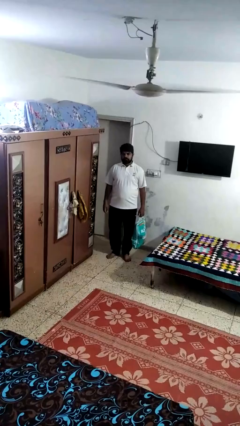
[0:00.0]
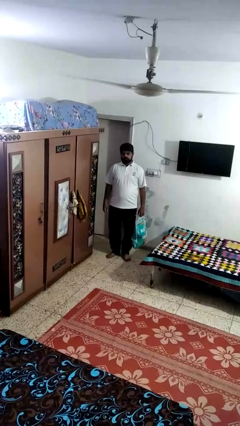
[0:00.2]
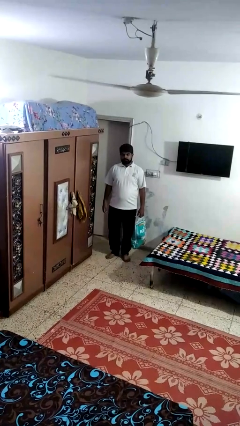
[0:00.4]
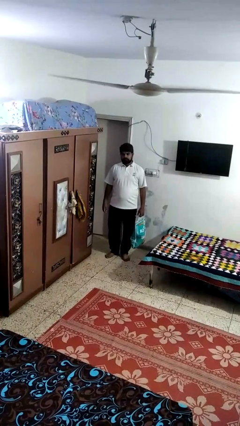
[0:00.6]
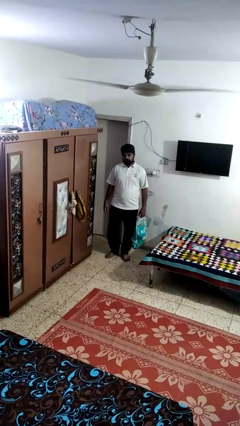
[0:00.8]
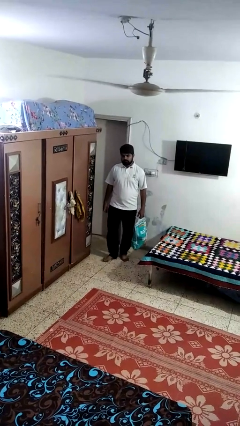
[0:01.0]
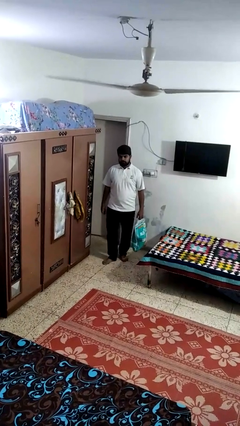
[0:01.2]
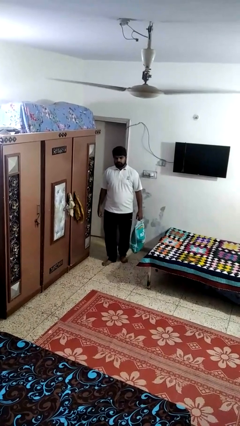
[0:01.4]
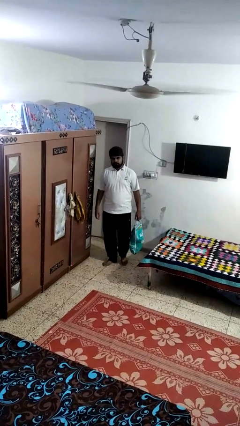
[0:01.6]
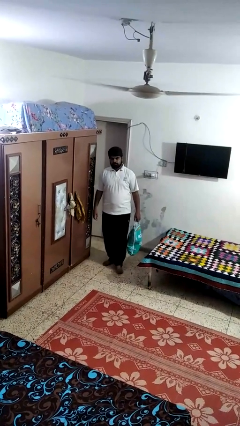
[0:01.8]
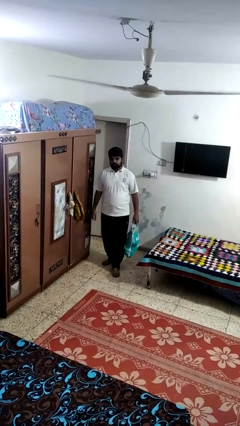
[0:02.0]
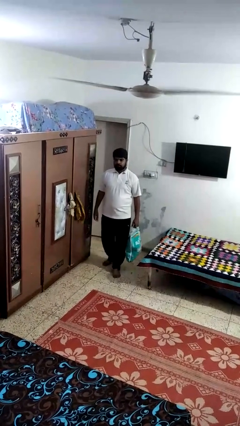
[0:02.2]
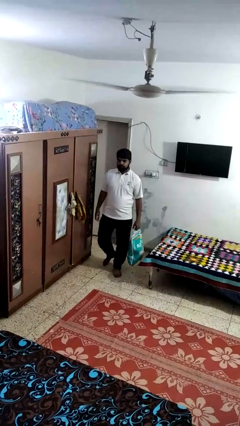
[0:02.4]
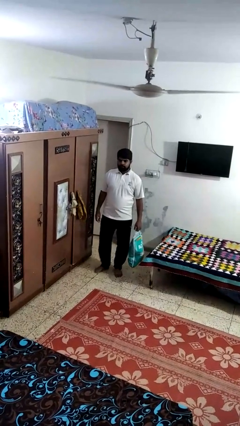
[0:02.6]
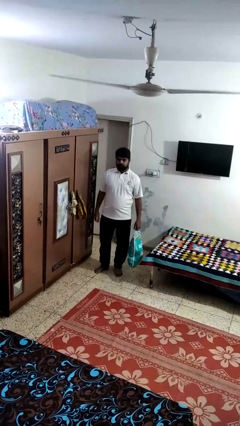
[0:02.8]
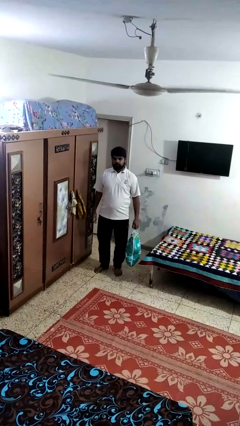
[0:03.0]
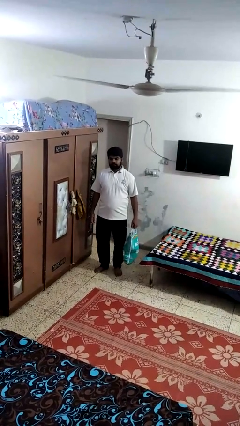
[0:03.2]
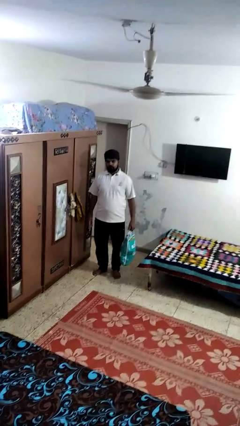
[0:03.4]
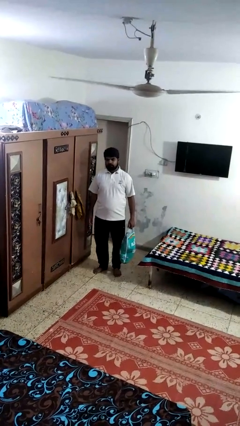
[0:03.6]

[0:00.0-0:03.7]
person carries groceries

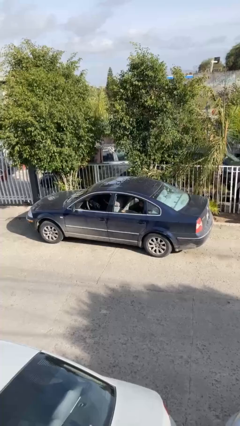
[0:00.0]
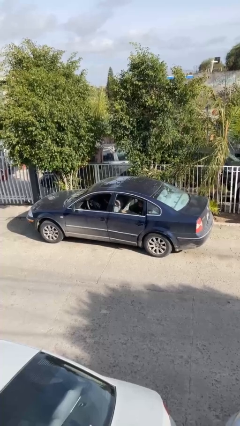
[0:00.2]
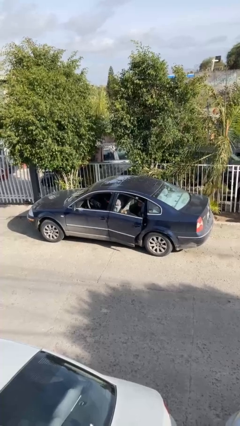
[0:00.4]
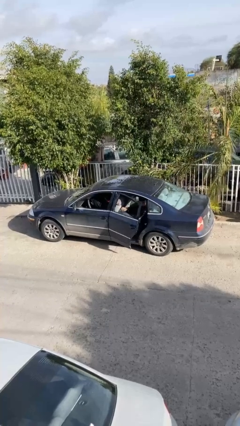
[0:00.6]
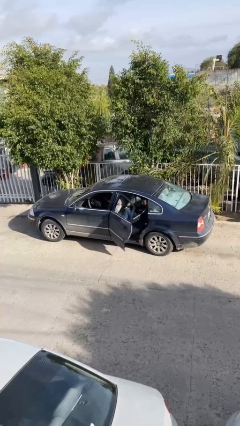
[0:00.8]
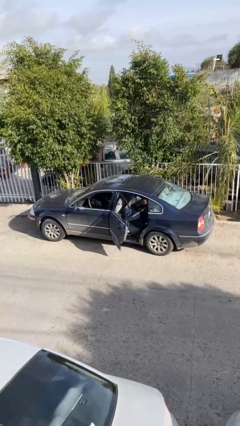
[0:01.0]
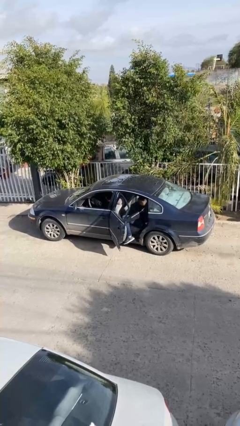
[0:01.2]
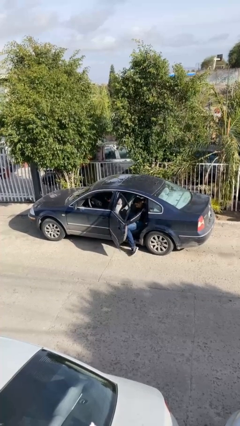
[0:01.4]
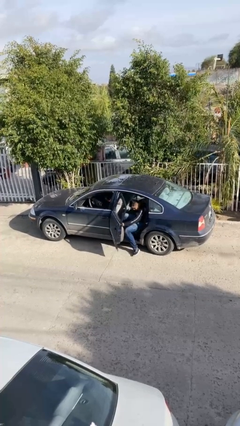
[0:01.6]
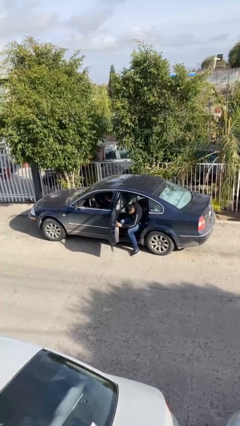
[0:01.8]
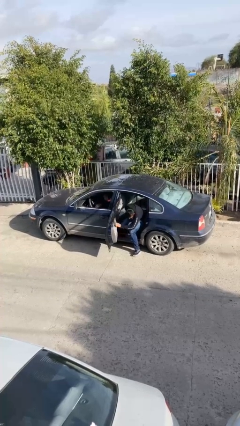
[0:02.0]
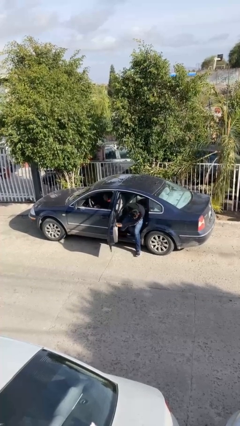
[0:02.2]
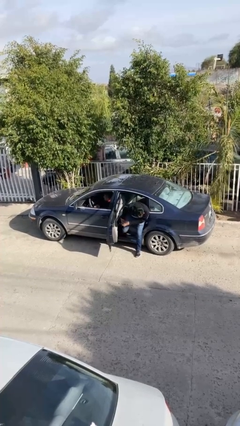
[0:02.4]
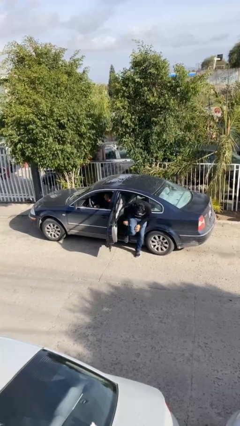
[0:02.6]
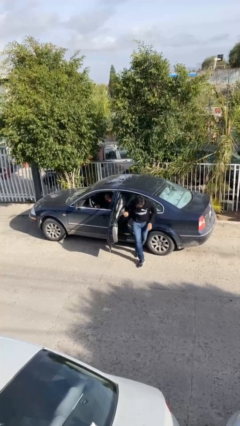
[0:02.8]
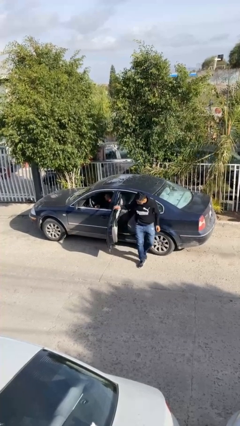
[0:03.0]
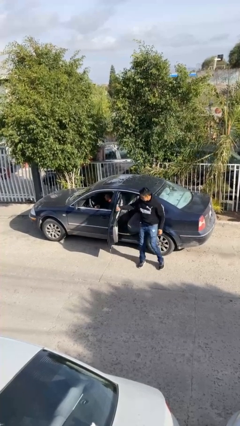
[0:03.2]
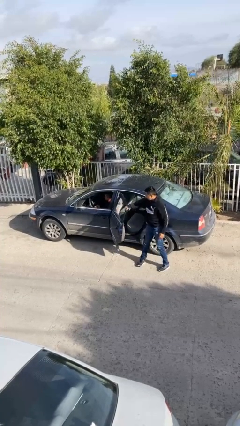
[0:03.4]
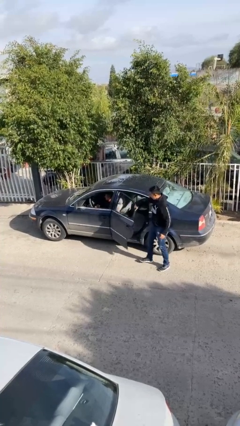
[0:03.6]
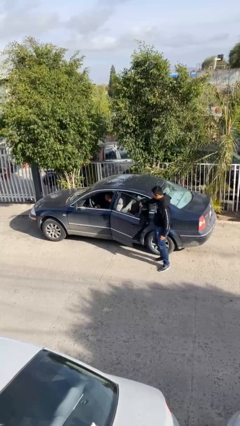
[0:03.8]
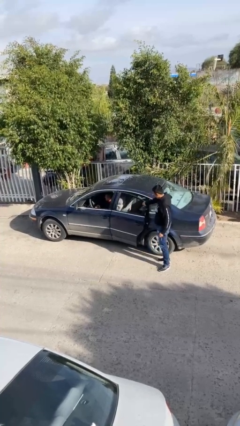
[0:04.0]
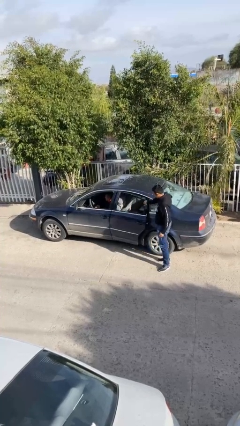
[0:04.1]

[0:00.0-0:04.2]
car drops off person

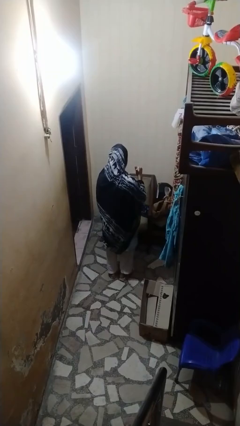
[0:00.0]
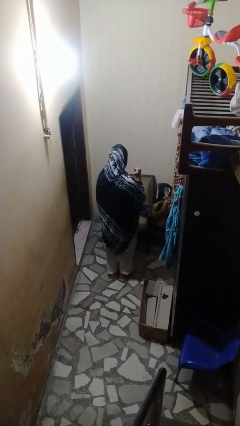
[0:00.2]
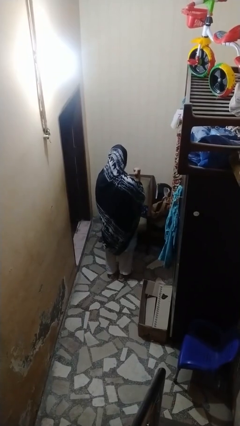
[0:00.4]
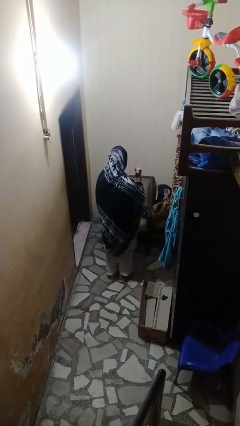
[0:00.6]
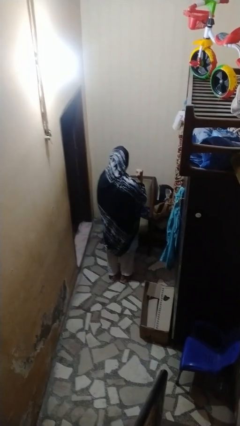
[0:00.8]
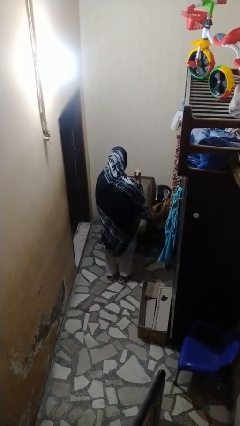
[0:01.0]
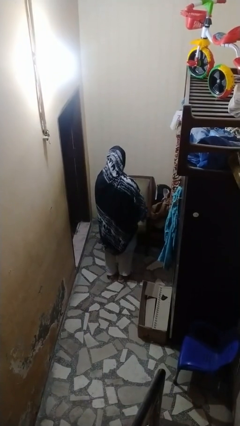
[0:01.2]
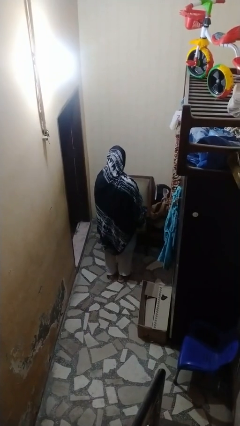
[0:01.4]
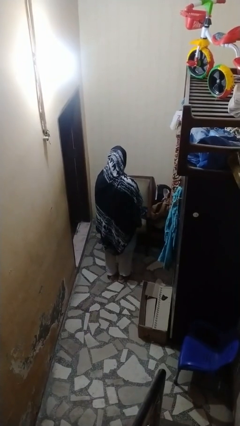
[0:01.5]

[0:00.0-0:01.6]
person gestures behind me

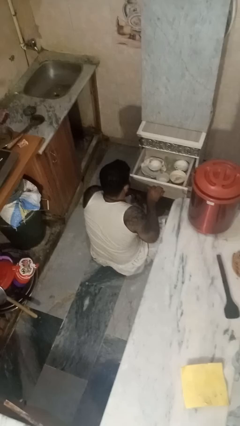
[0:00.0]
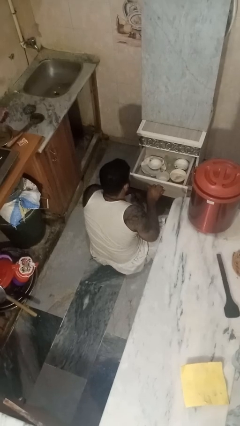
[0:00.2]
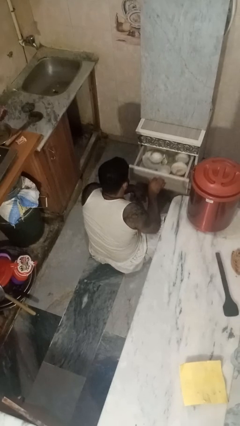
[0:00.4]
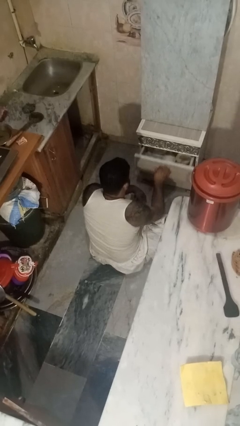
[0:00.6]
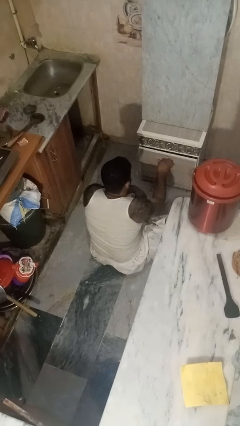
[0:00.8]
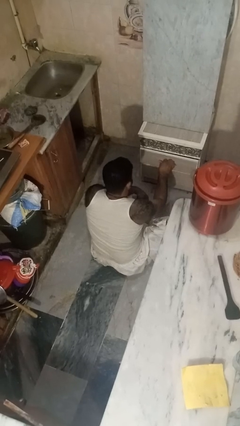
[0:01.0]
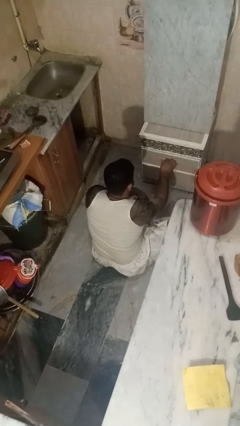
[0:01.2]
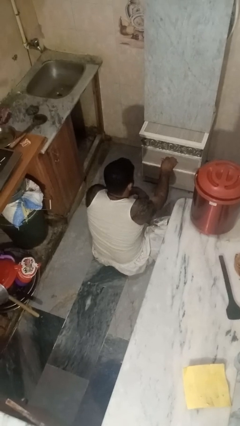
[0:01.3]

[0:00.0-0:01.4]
person closes kitchen drawer

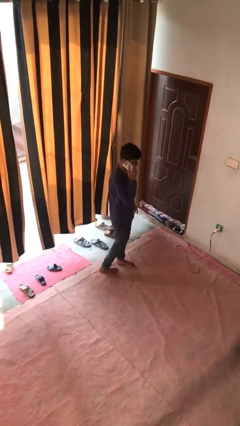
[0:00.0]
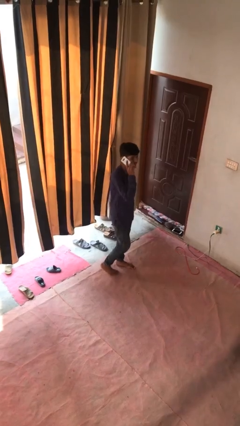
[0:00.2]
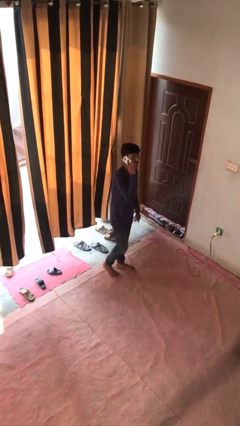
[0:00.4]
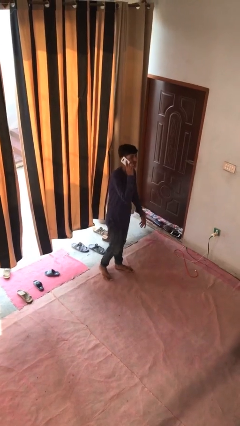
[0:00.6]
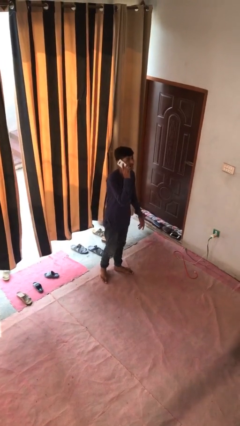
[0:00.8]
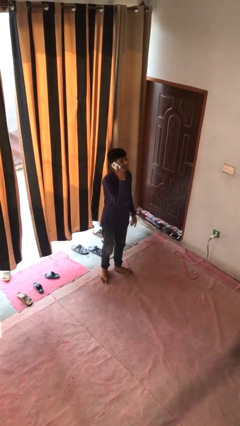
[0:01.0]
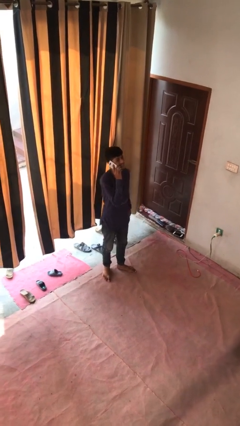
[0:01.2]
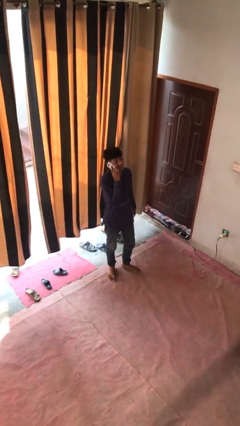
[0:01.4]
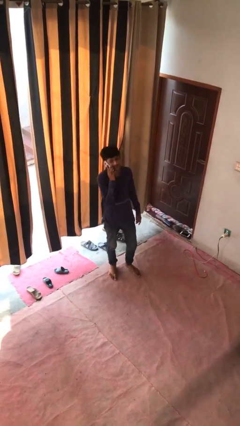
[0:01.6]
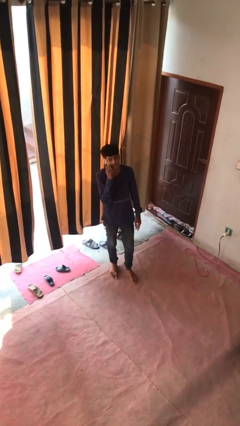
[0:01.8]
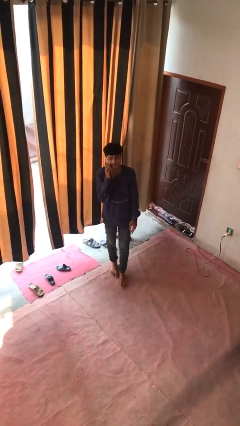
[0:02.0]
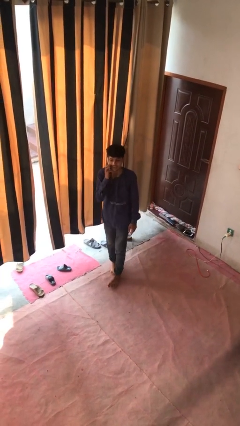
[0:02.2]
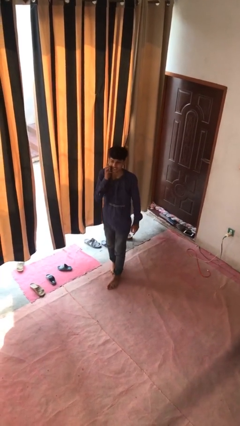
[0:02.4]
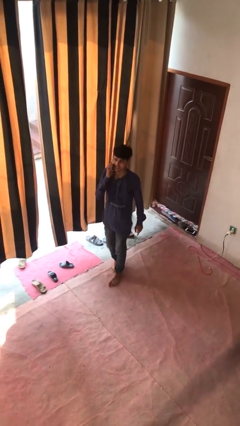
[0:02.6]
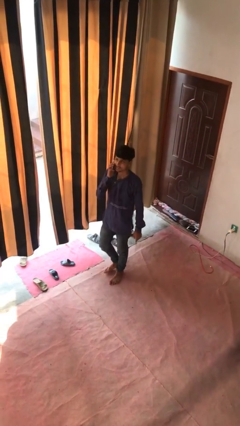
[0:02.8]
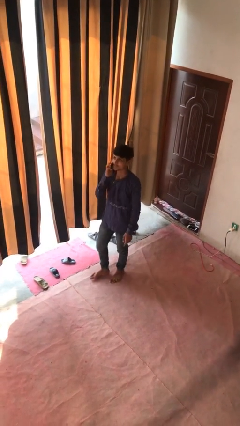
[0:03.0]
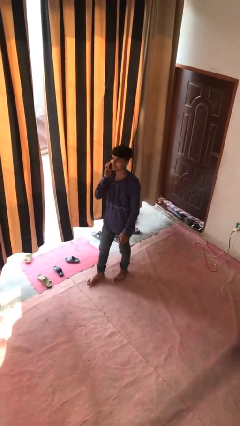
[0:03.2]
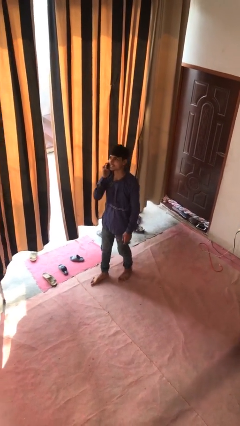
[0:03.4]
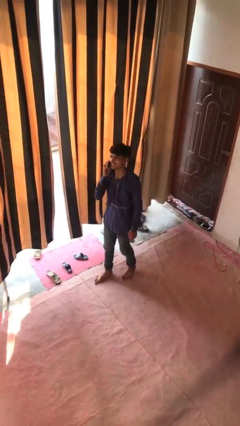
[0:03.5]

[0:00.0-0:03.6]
person talks on phone

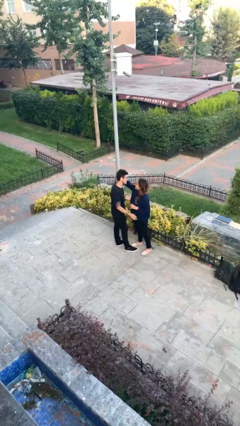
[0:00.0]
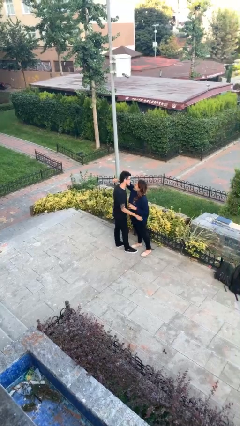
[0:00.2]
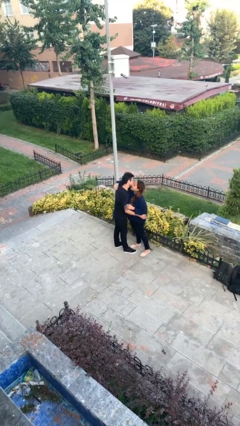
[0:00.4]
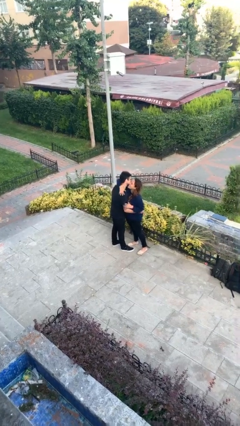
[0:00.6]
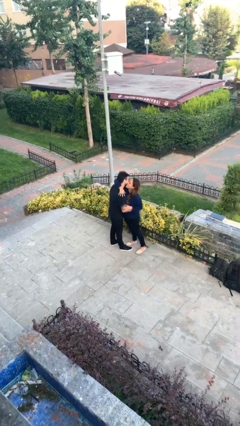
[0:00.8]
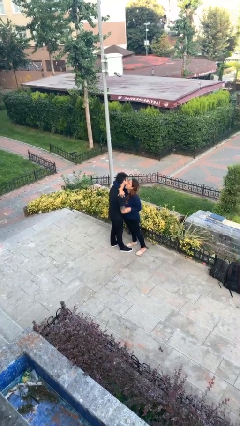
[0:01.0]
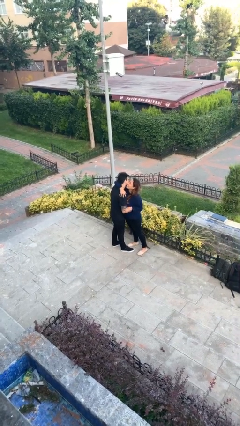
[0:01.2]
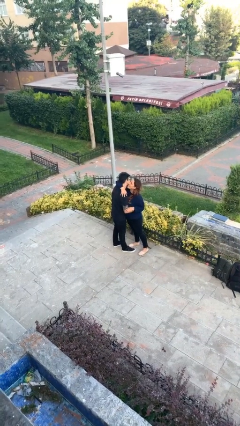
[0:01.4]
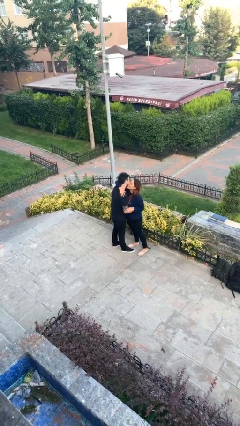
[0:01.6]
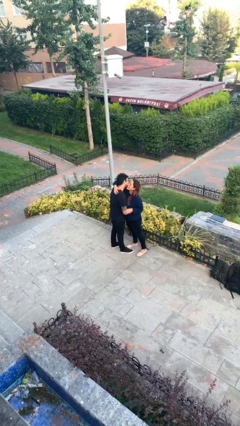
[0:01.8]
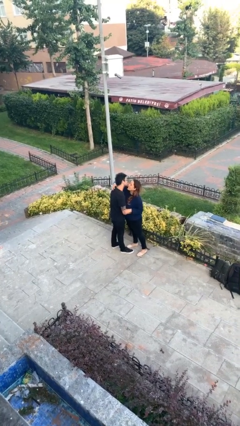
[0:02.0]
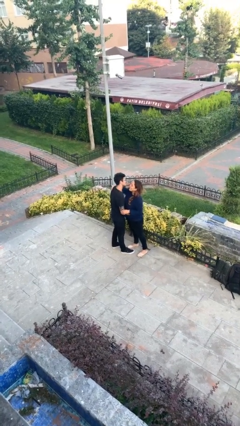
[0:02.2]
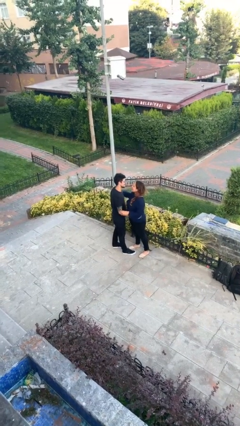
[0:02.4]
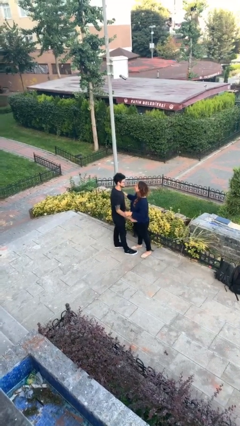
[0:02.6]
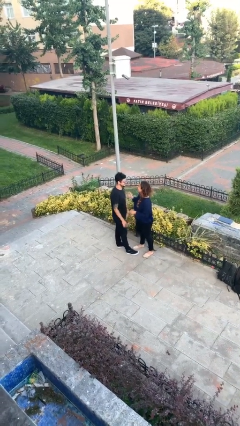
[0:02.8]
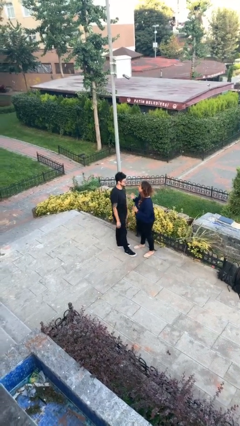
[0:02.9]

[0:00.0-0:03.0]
person embraces person

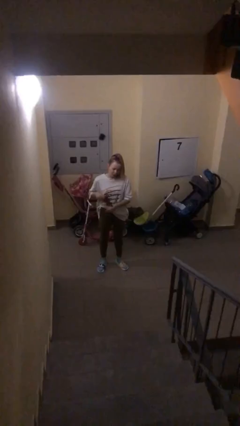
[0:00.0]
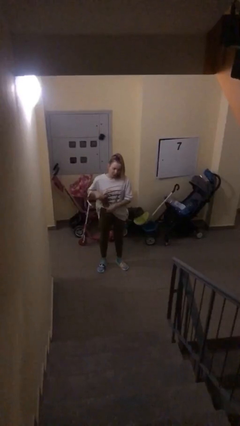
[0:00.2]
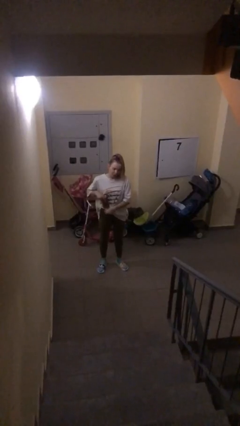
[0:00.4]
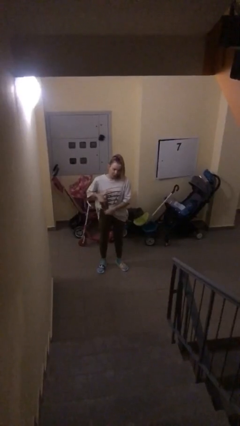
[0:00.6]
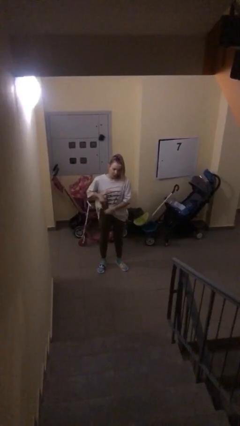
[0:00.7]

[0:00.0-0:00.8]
person puts phone into pocket
